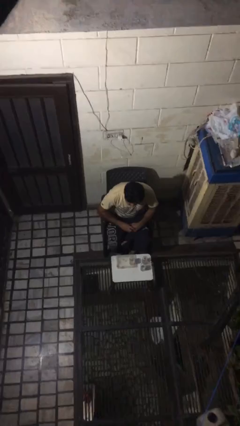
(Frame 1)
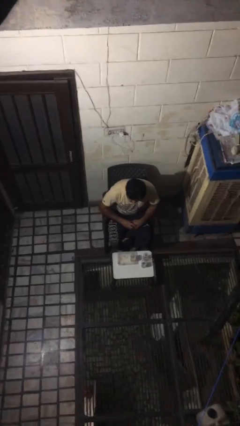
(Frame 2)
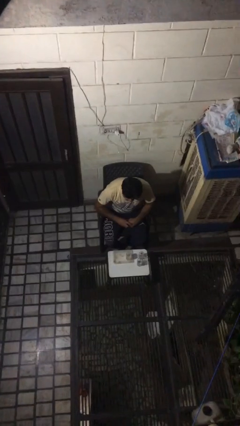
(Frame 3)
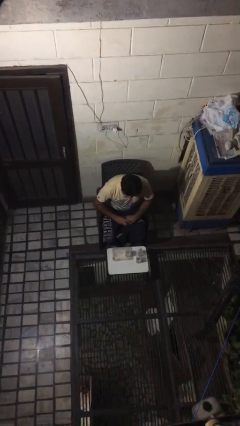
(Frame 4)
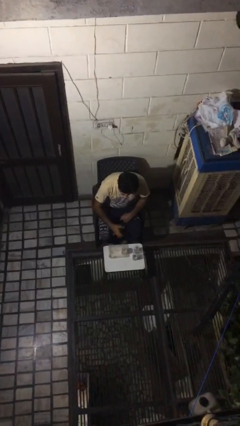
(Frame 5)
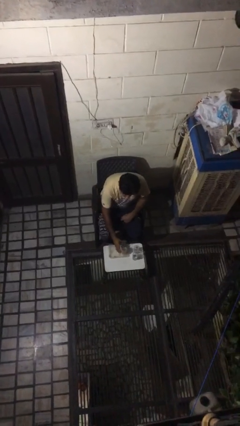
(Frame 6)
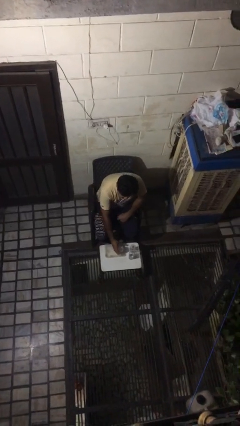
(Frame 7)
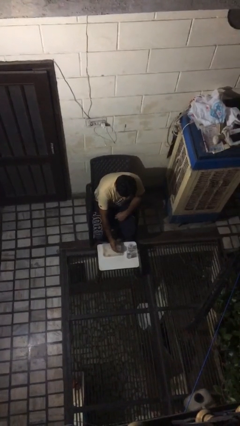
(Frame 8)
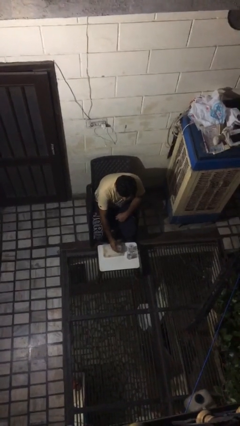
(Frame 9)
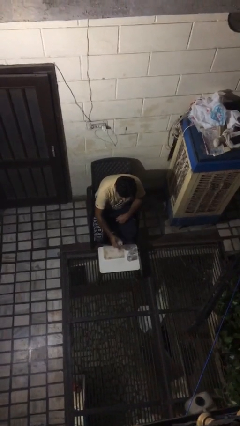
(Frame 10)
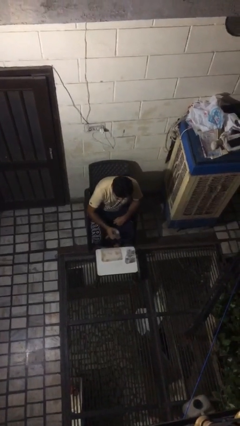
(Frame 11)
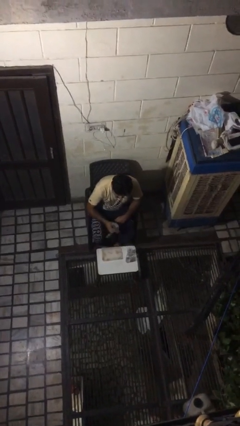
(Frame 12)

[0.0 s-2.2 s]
person picks up object from table

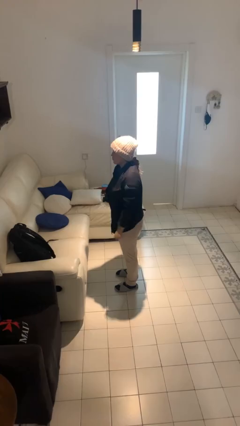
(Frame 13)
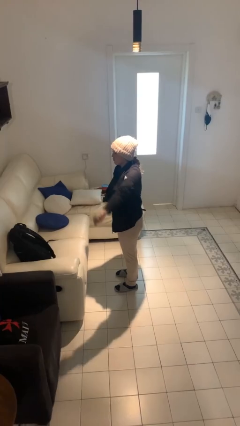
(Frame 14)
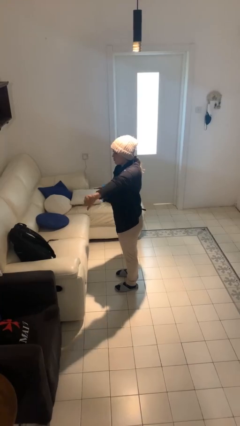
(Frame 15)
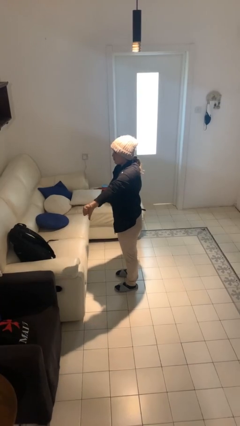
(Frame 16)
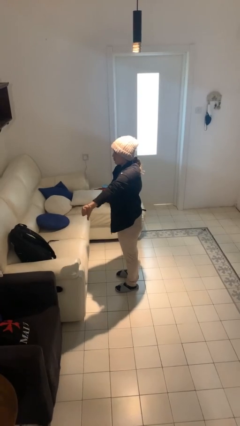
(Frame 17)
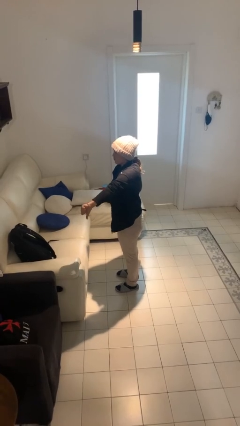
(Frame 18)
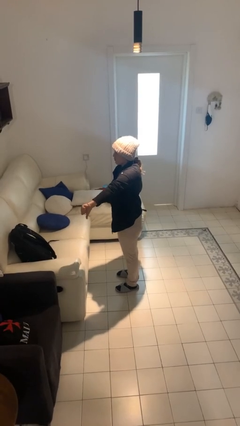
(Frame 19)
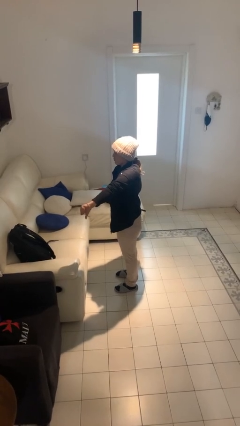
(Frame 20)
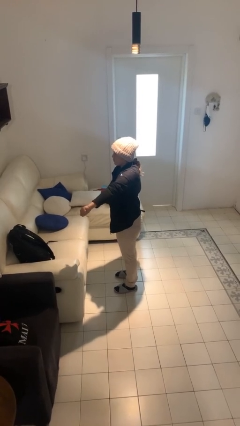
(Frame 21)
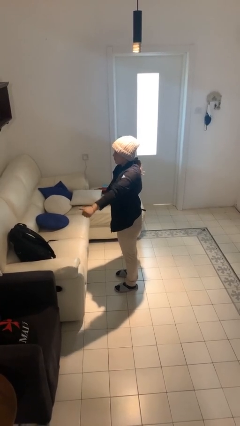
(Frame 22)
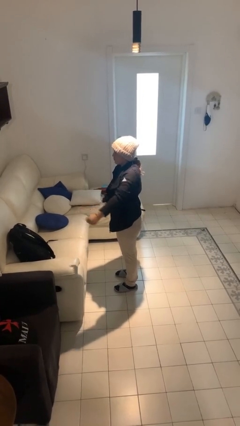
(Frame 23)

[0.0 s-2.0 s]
person gestures thumbs down

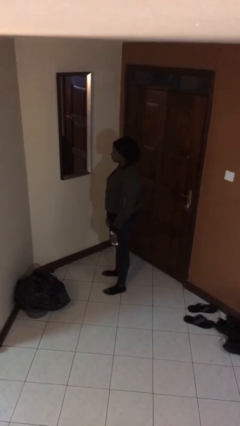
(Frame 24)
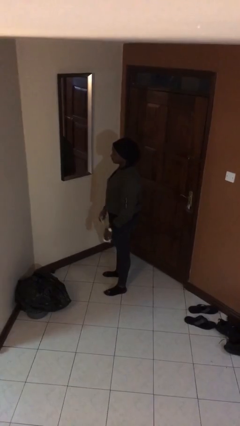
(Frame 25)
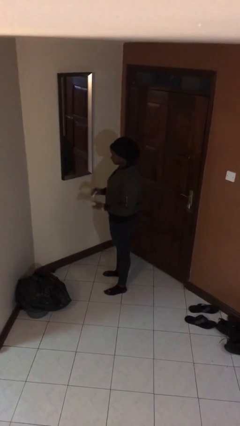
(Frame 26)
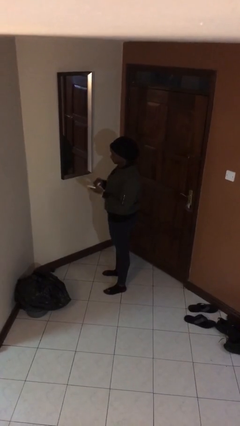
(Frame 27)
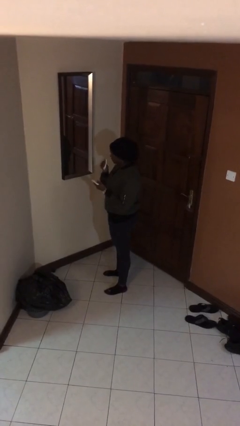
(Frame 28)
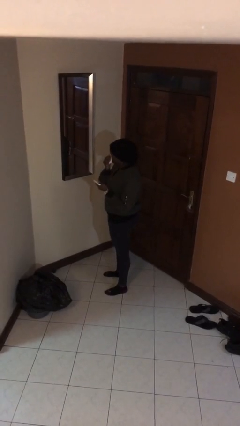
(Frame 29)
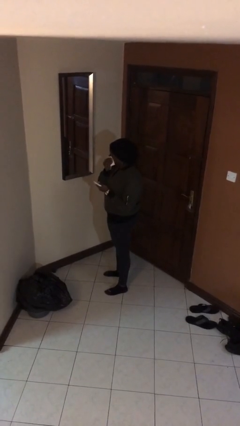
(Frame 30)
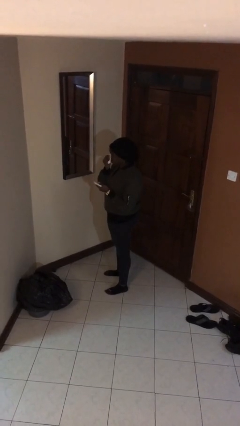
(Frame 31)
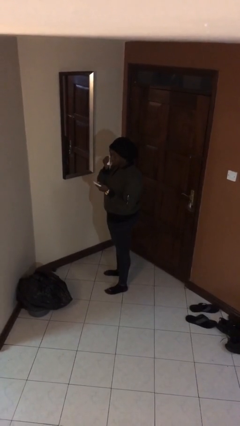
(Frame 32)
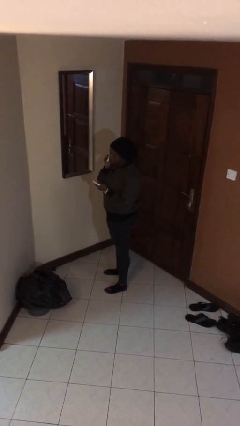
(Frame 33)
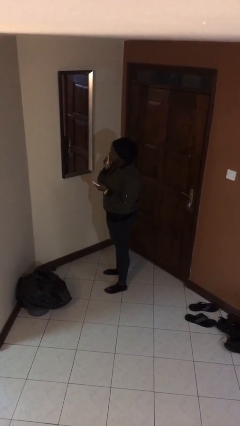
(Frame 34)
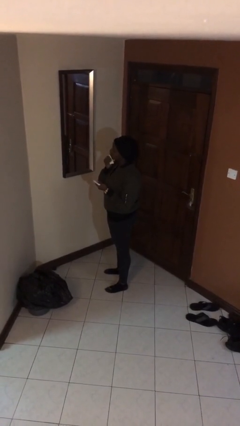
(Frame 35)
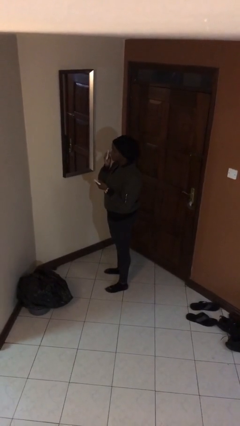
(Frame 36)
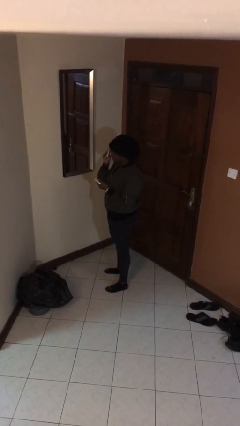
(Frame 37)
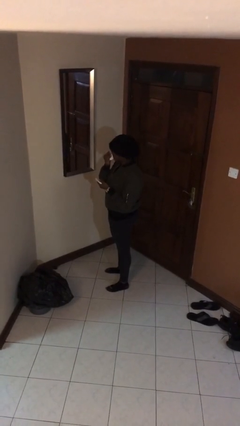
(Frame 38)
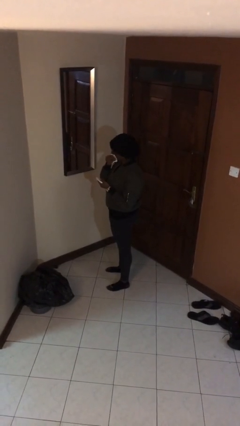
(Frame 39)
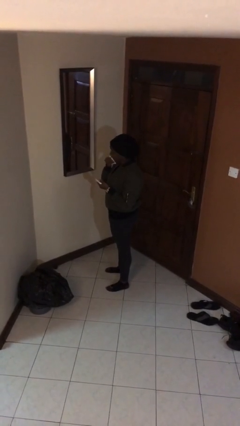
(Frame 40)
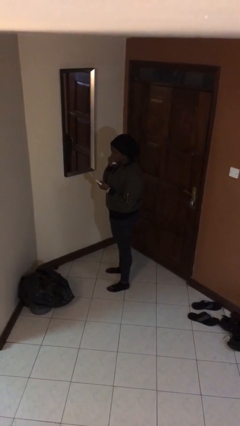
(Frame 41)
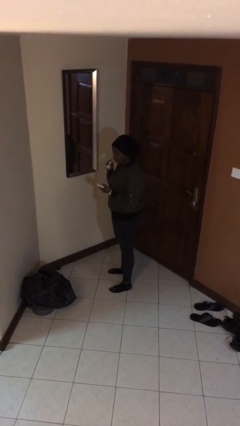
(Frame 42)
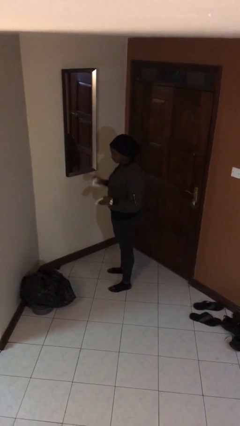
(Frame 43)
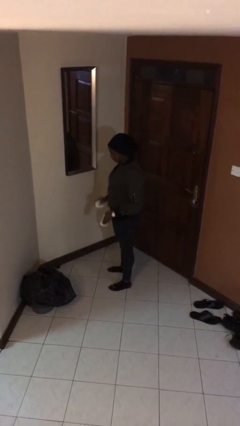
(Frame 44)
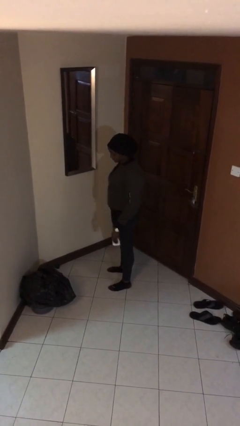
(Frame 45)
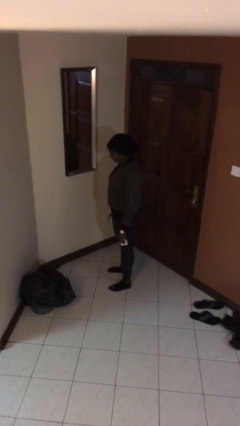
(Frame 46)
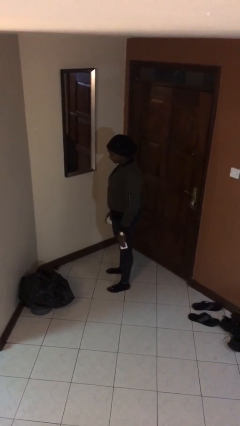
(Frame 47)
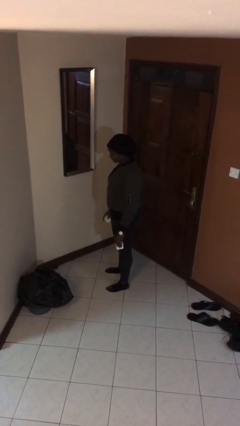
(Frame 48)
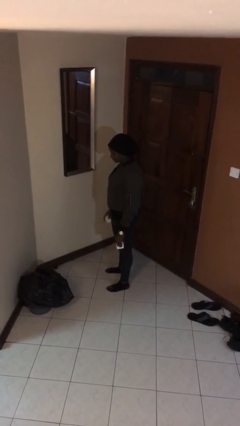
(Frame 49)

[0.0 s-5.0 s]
person applies foundation makeup

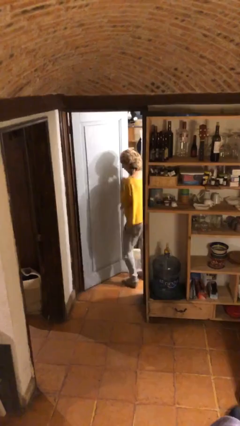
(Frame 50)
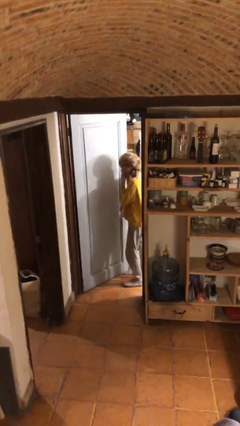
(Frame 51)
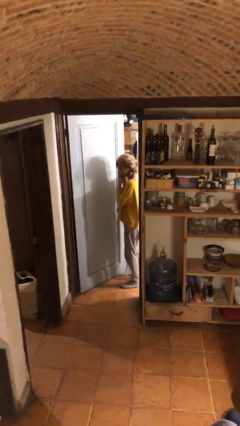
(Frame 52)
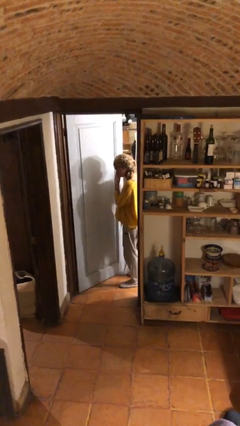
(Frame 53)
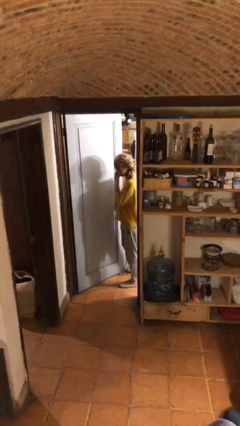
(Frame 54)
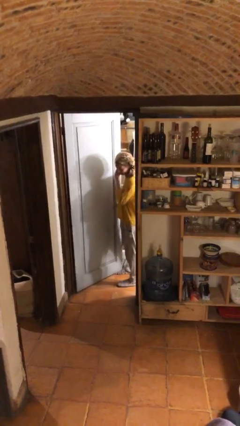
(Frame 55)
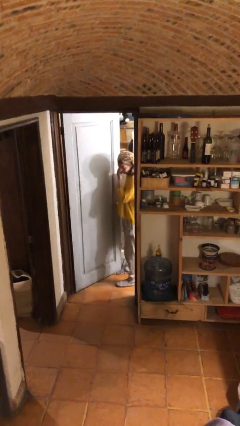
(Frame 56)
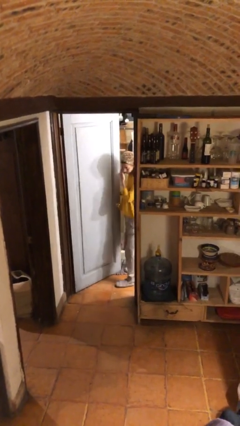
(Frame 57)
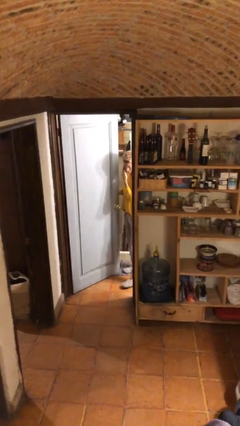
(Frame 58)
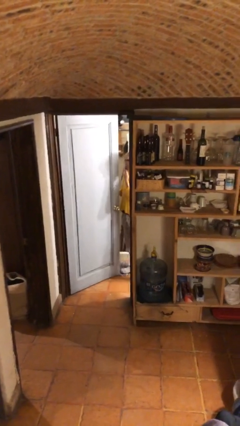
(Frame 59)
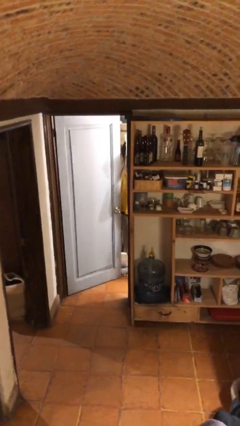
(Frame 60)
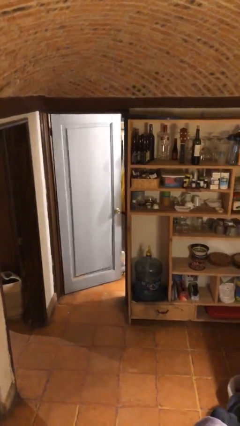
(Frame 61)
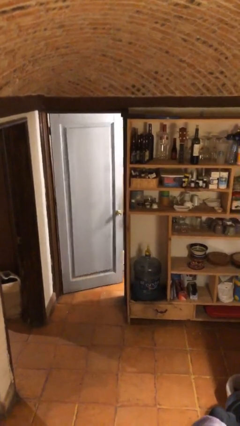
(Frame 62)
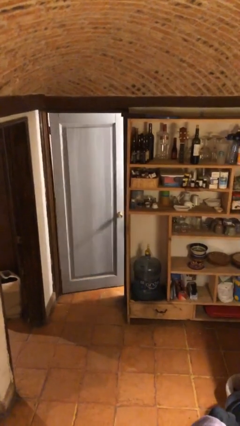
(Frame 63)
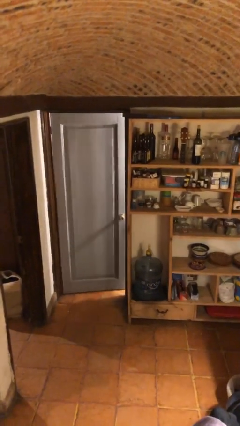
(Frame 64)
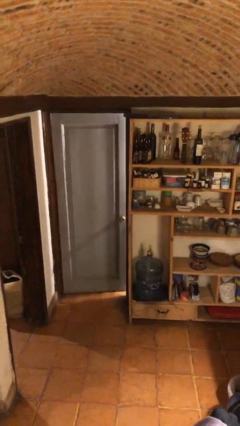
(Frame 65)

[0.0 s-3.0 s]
person closes facility door

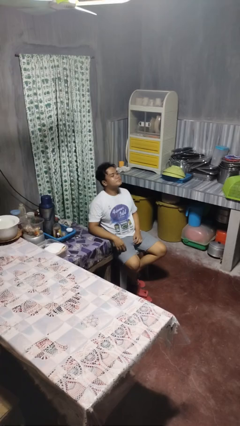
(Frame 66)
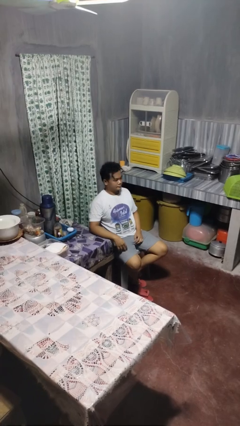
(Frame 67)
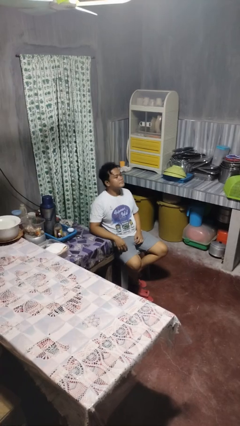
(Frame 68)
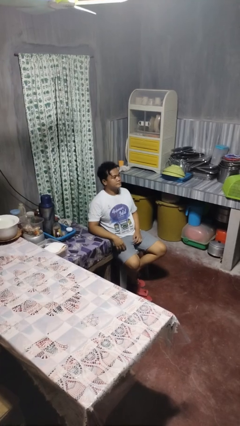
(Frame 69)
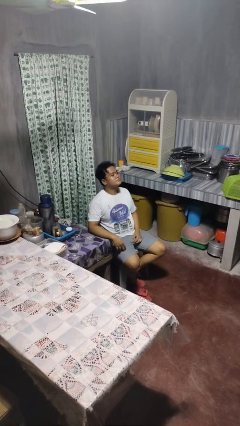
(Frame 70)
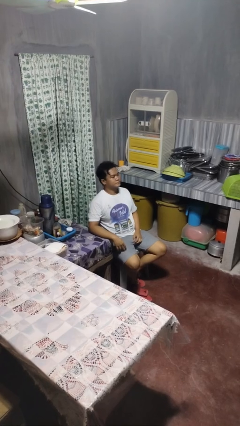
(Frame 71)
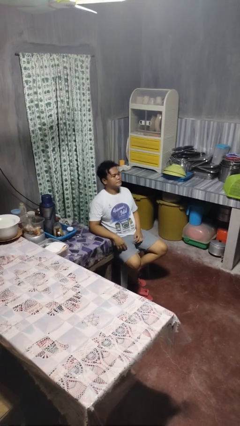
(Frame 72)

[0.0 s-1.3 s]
person nods head

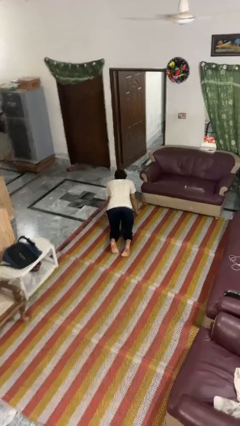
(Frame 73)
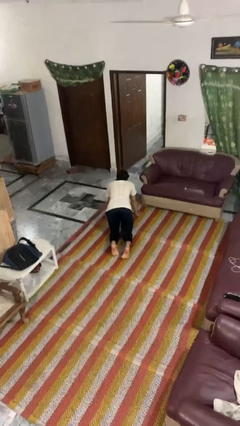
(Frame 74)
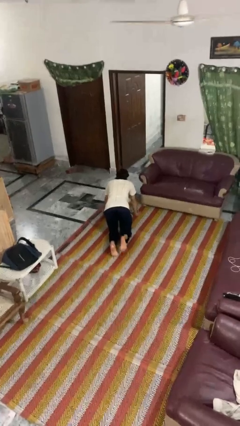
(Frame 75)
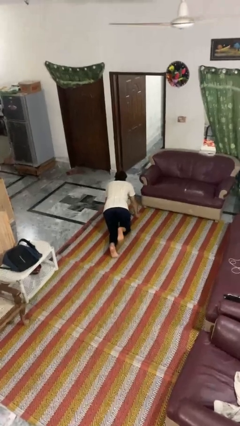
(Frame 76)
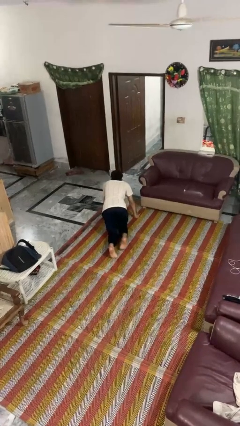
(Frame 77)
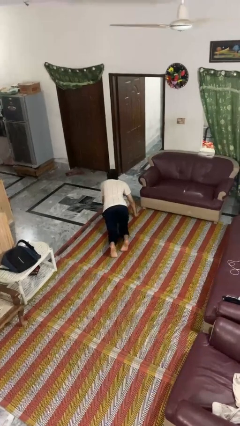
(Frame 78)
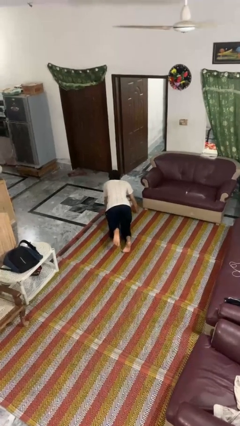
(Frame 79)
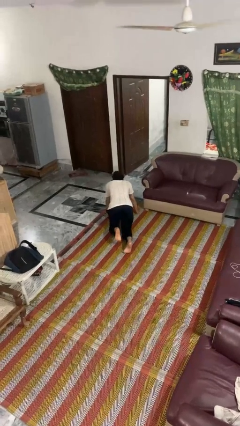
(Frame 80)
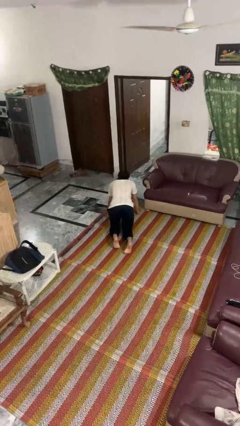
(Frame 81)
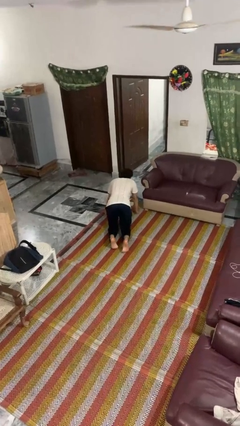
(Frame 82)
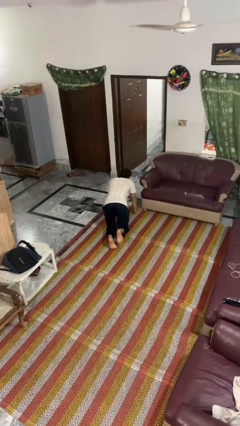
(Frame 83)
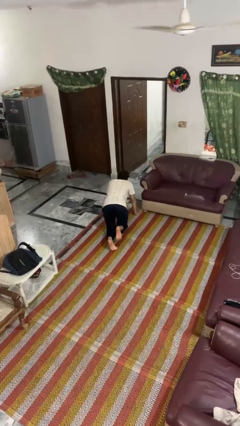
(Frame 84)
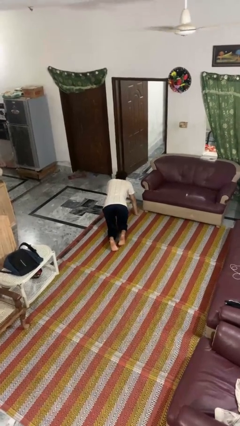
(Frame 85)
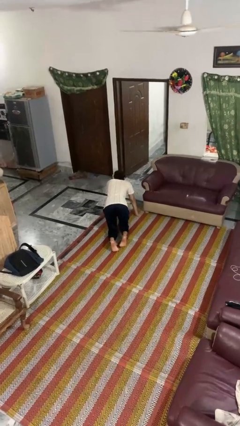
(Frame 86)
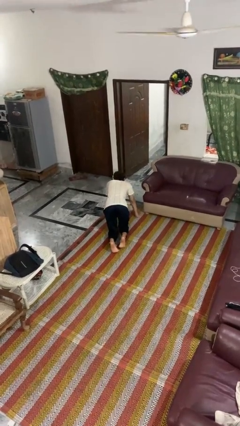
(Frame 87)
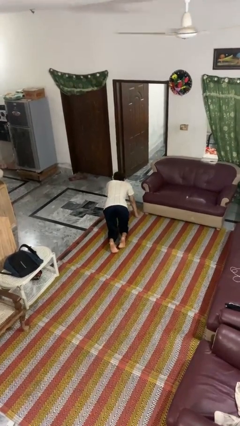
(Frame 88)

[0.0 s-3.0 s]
person crawls

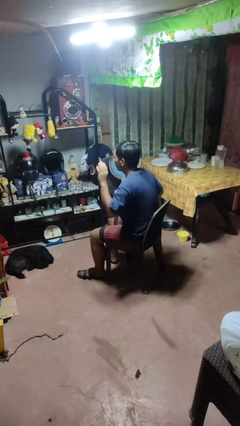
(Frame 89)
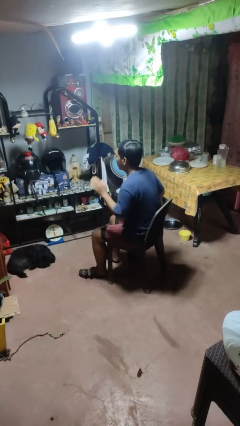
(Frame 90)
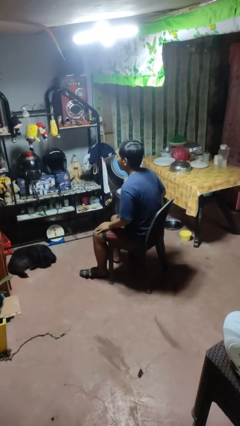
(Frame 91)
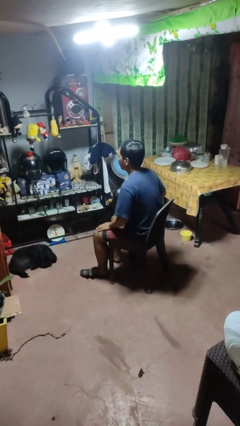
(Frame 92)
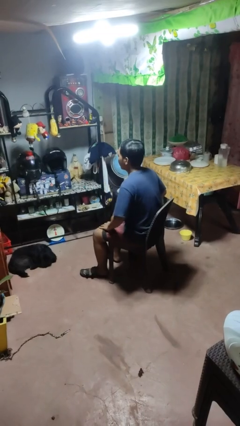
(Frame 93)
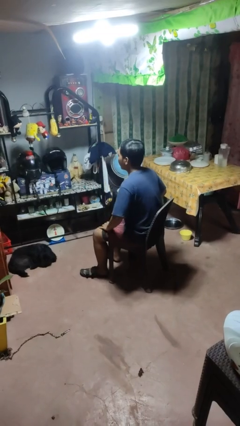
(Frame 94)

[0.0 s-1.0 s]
person slaps hands on thighs
